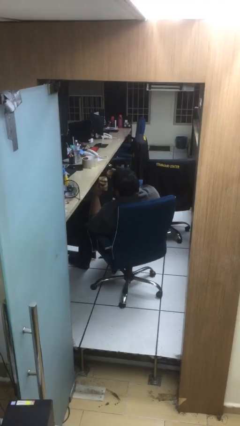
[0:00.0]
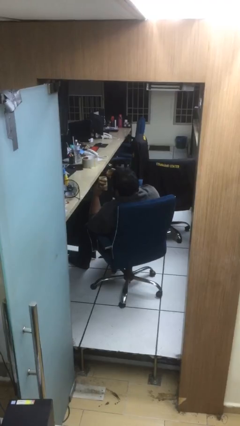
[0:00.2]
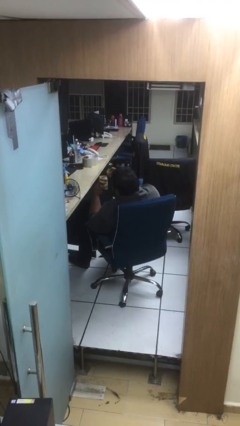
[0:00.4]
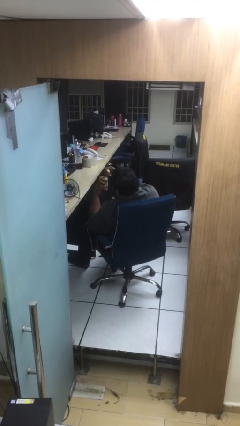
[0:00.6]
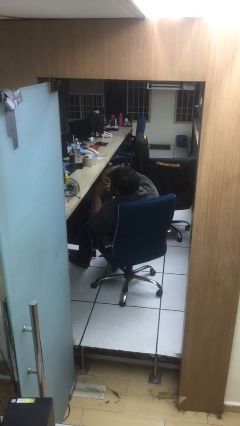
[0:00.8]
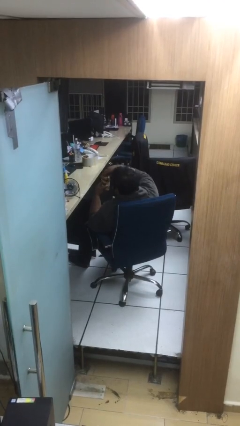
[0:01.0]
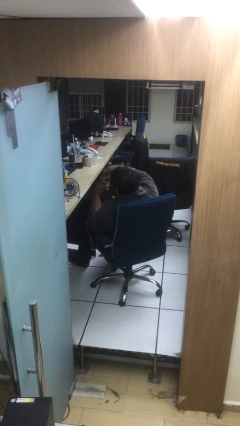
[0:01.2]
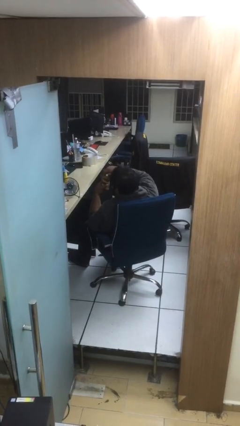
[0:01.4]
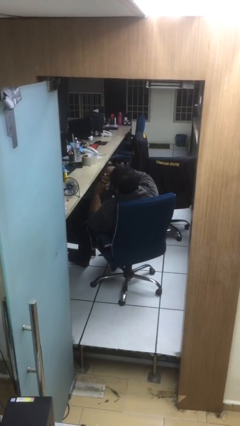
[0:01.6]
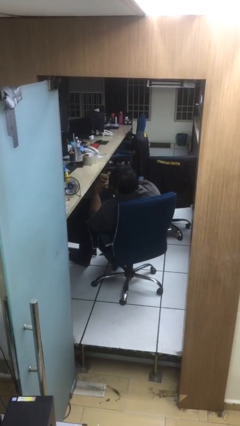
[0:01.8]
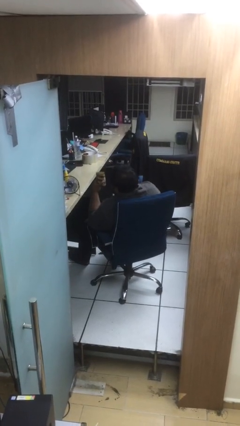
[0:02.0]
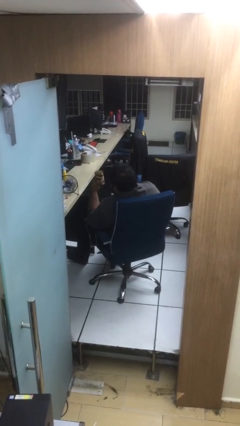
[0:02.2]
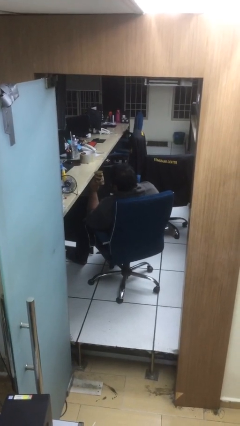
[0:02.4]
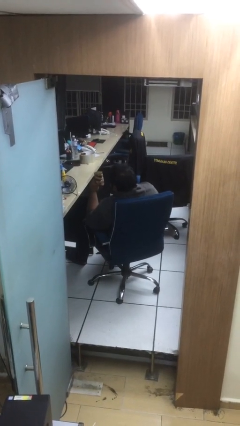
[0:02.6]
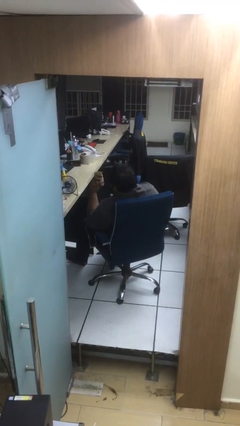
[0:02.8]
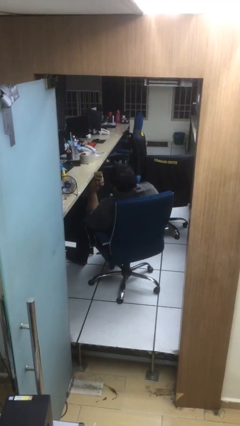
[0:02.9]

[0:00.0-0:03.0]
person closes jar

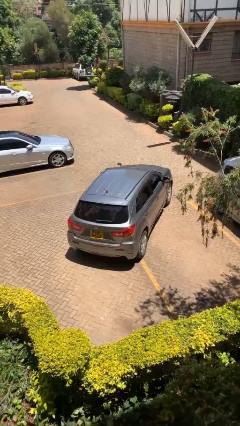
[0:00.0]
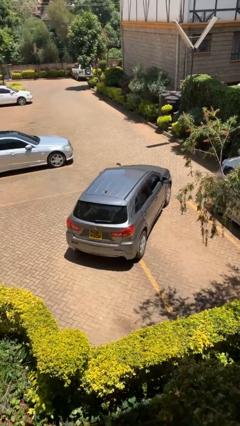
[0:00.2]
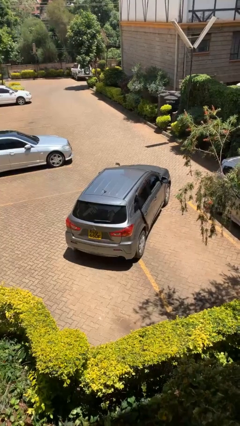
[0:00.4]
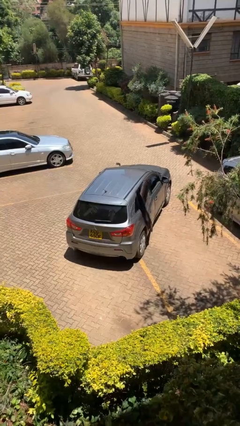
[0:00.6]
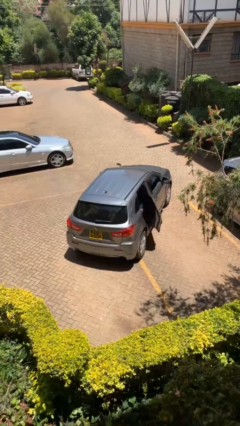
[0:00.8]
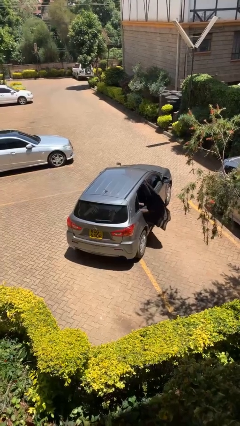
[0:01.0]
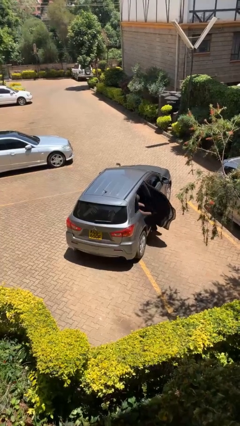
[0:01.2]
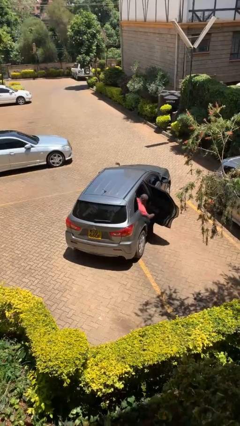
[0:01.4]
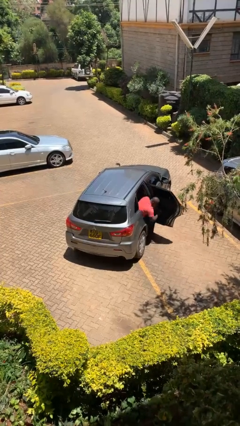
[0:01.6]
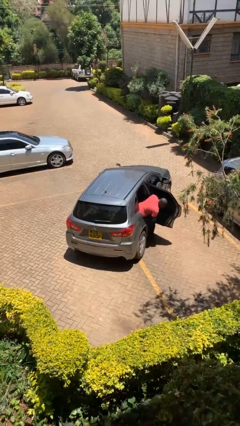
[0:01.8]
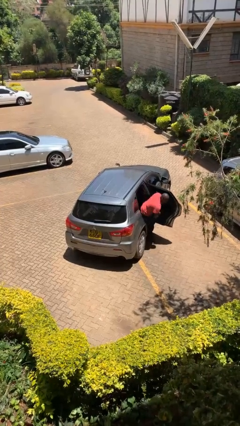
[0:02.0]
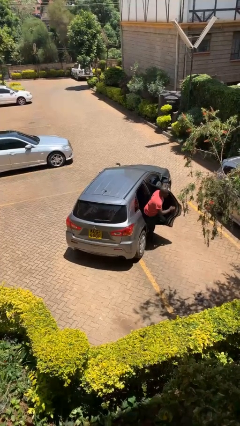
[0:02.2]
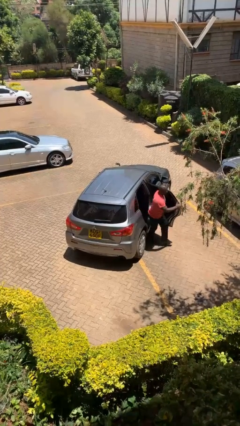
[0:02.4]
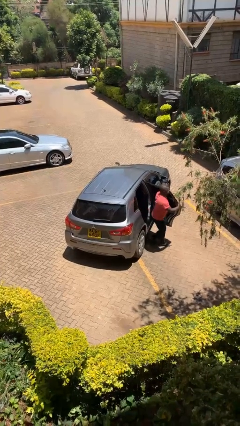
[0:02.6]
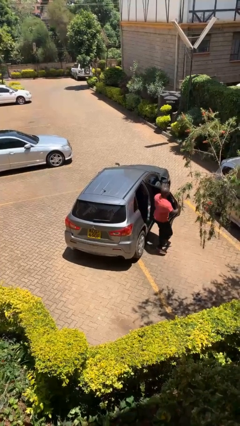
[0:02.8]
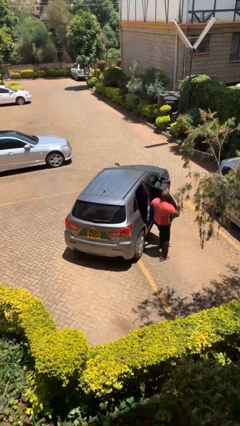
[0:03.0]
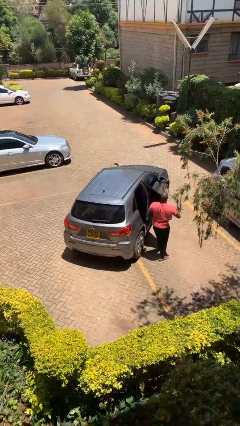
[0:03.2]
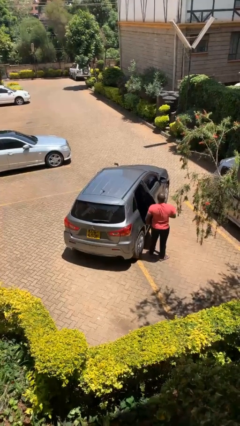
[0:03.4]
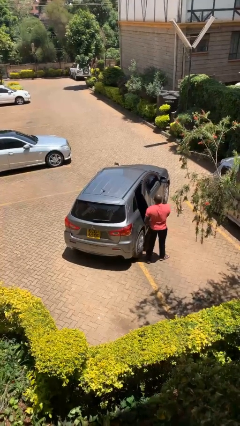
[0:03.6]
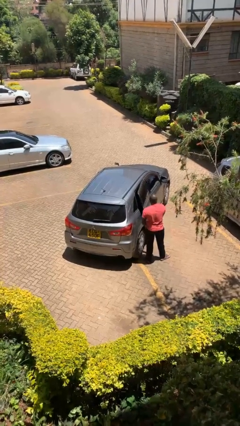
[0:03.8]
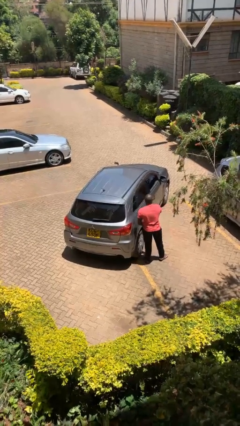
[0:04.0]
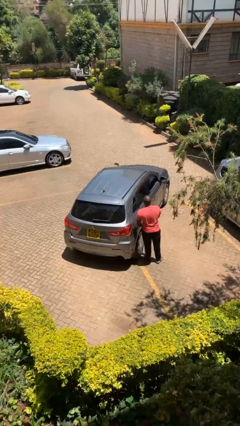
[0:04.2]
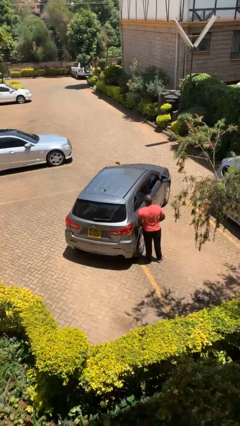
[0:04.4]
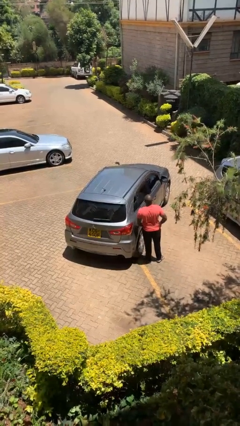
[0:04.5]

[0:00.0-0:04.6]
car drops off person

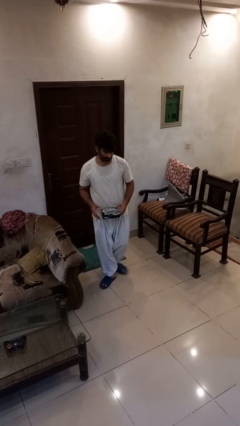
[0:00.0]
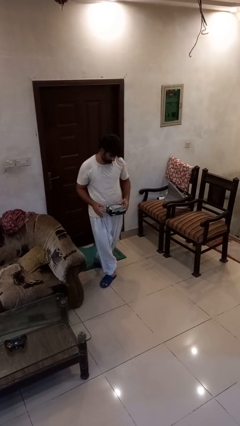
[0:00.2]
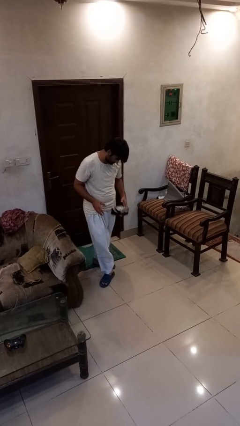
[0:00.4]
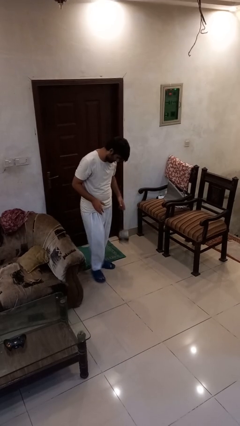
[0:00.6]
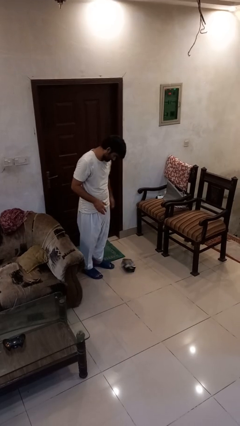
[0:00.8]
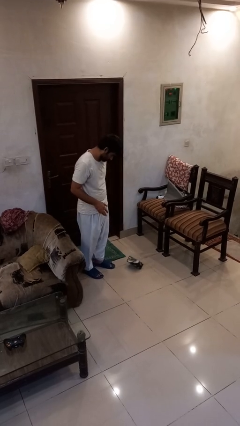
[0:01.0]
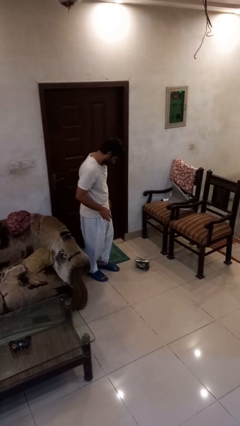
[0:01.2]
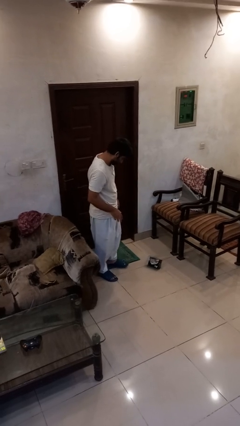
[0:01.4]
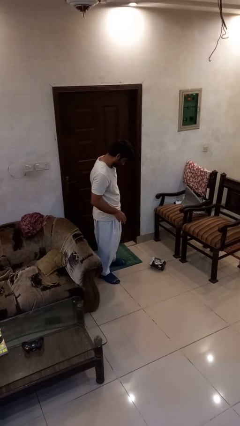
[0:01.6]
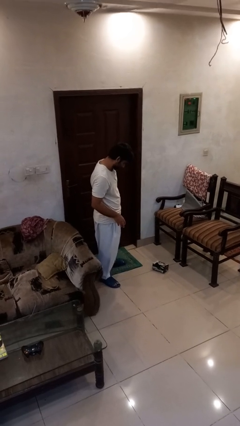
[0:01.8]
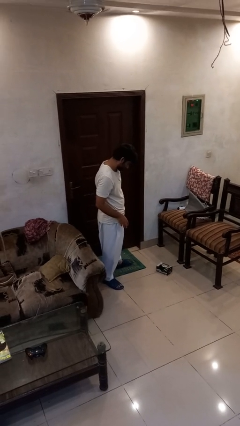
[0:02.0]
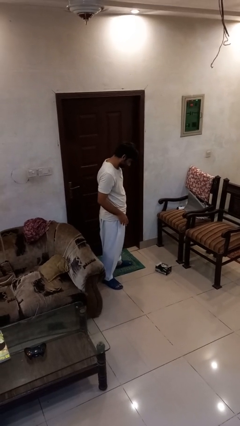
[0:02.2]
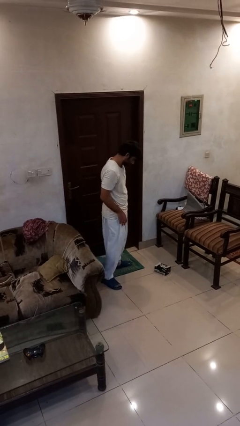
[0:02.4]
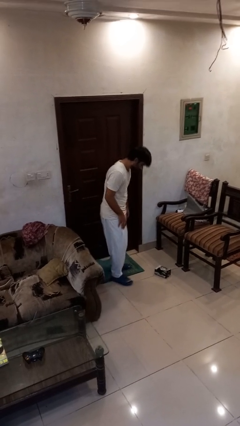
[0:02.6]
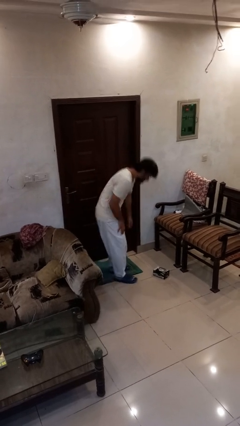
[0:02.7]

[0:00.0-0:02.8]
person drops object

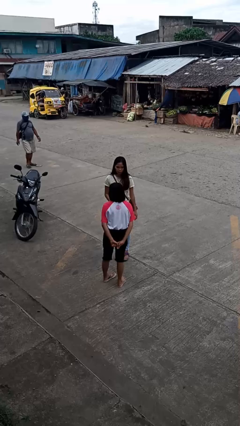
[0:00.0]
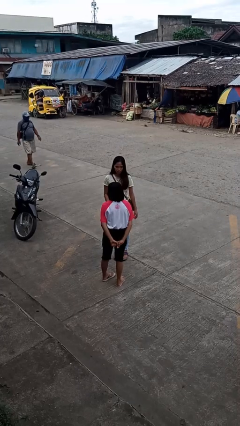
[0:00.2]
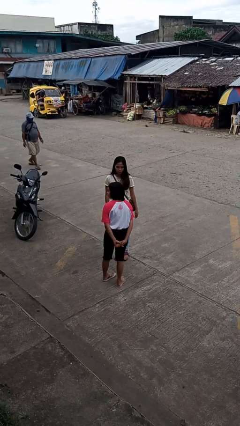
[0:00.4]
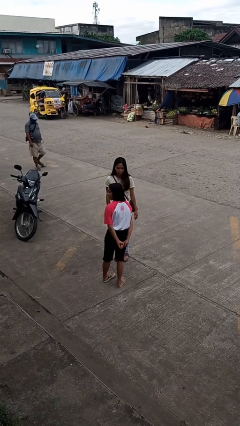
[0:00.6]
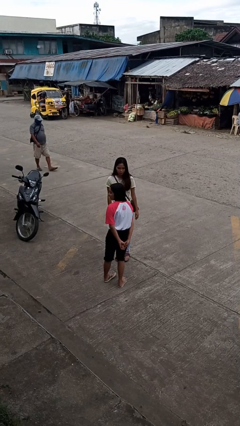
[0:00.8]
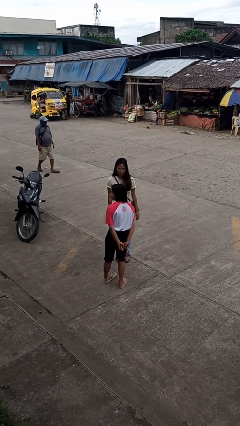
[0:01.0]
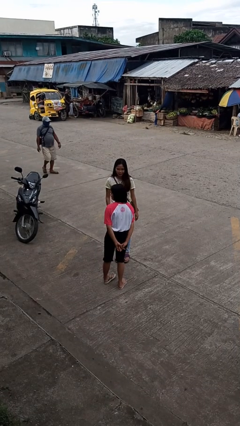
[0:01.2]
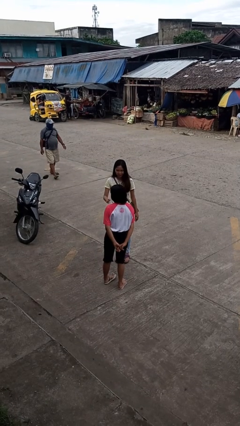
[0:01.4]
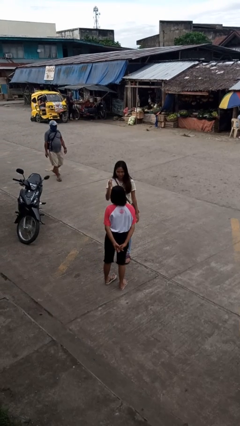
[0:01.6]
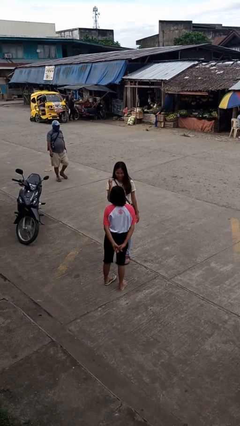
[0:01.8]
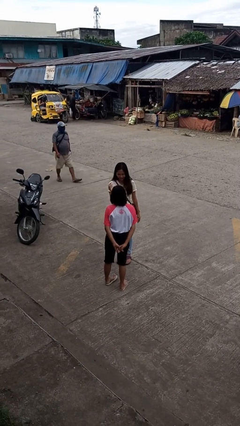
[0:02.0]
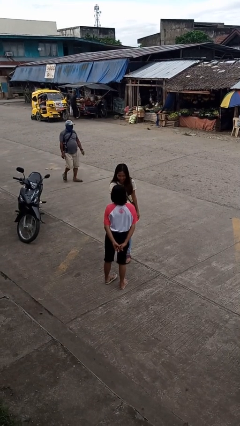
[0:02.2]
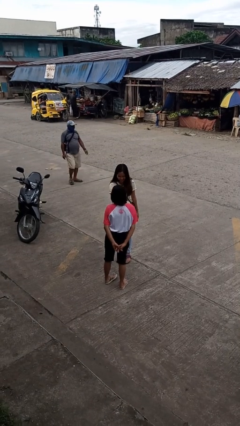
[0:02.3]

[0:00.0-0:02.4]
person laughs with person

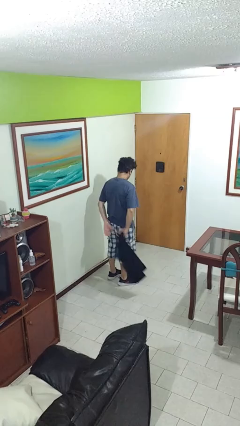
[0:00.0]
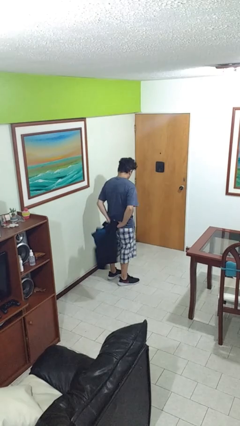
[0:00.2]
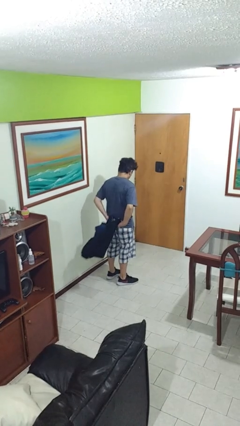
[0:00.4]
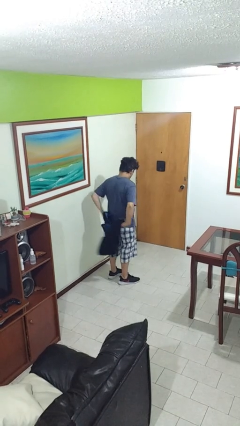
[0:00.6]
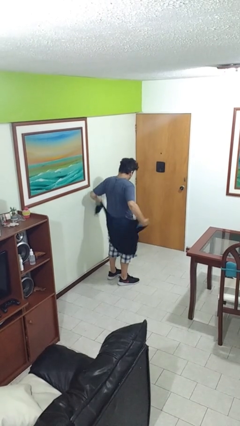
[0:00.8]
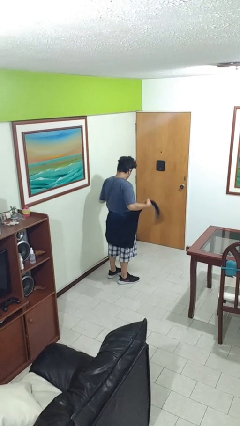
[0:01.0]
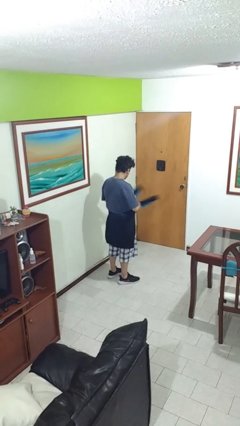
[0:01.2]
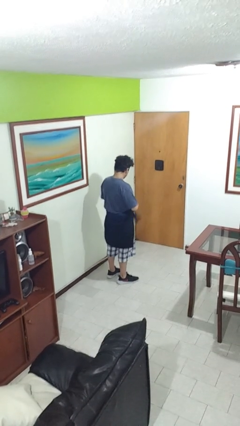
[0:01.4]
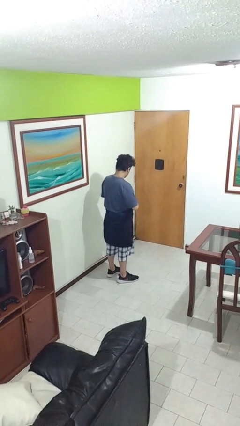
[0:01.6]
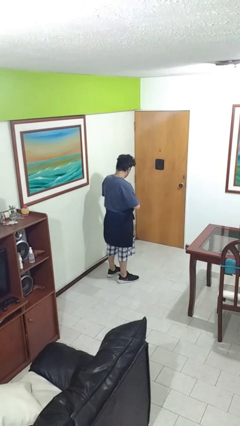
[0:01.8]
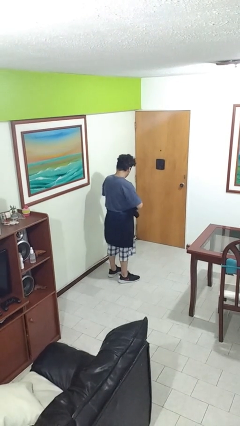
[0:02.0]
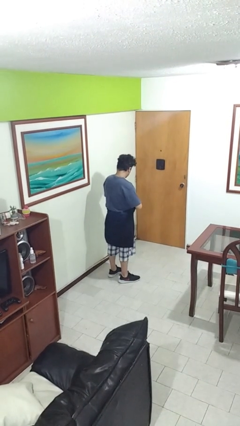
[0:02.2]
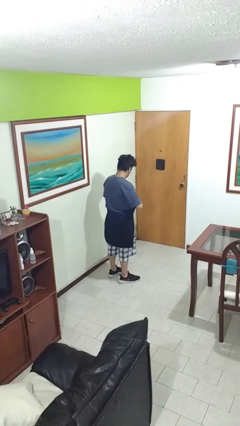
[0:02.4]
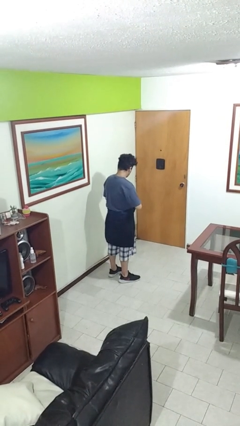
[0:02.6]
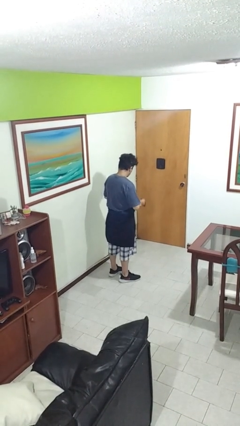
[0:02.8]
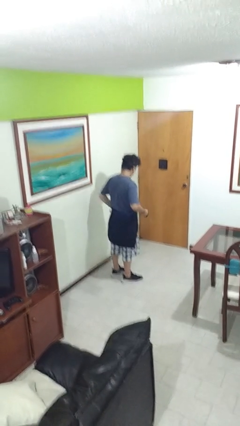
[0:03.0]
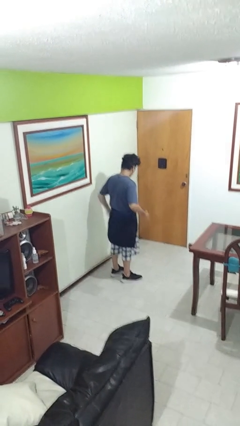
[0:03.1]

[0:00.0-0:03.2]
person ties jacket around waist

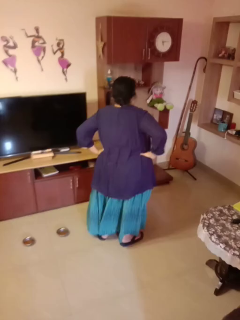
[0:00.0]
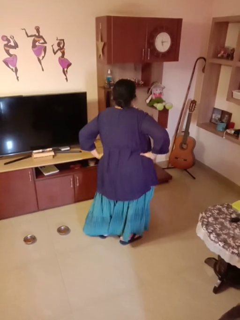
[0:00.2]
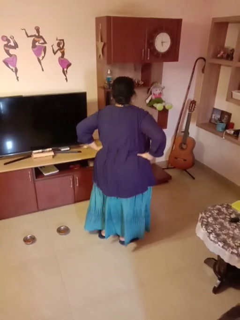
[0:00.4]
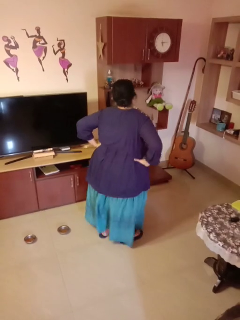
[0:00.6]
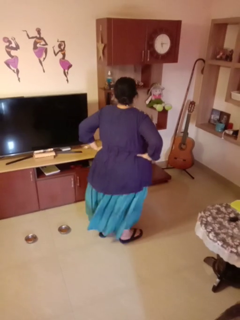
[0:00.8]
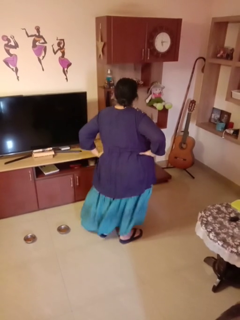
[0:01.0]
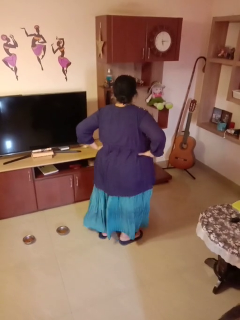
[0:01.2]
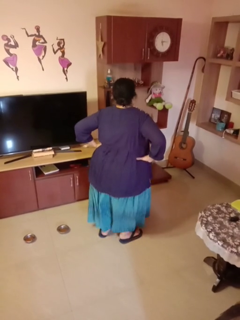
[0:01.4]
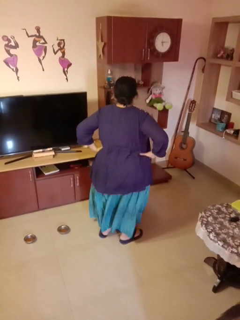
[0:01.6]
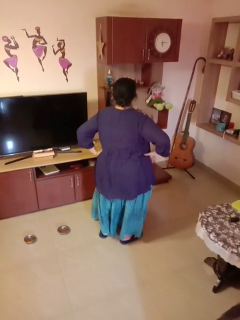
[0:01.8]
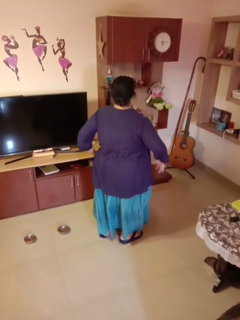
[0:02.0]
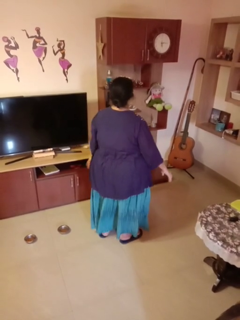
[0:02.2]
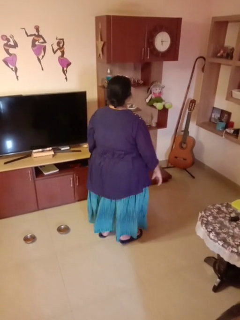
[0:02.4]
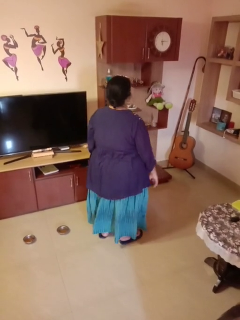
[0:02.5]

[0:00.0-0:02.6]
person wiggles hips
